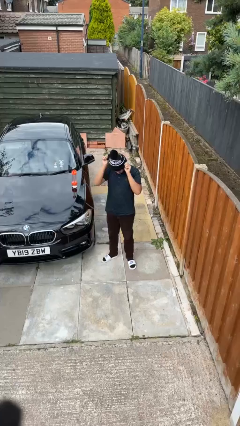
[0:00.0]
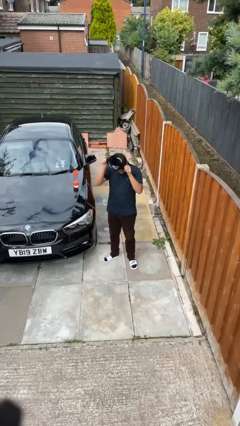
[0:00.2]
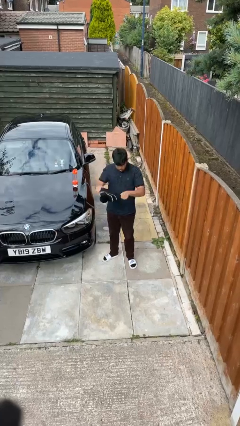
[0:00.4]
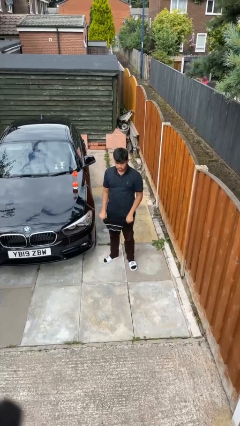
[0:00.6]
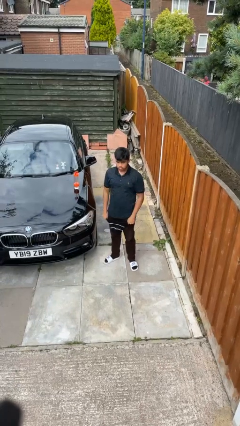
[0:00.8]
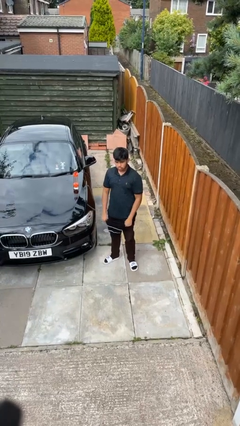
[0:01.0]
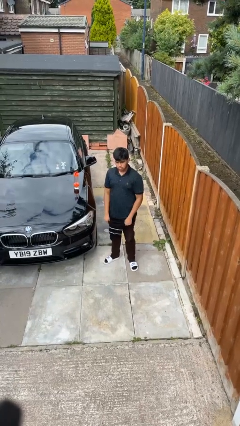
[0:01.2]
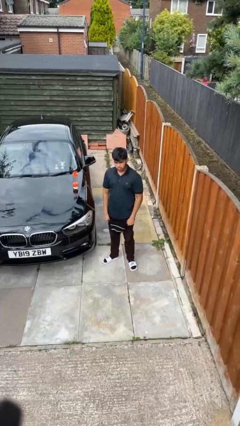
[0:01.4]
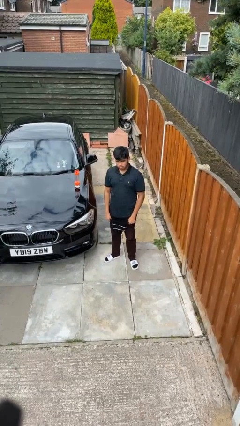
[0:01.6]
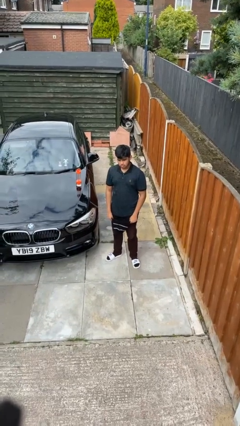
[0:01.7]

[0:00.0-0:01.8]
person takes off hat

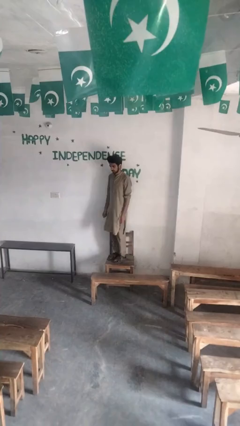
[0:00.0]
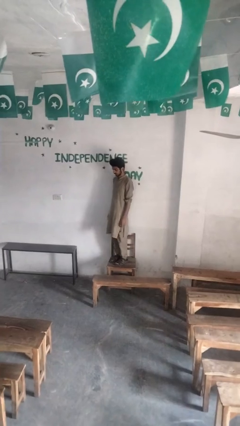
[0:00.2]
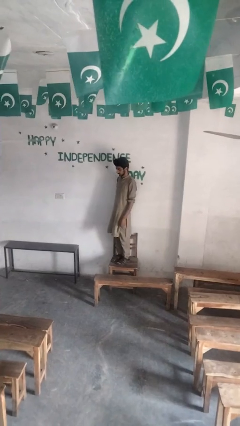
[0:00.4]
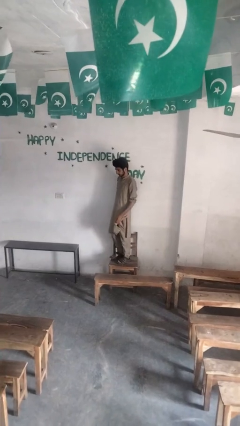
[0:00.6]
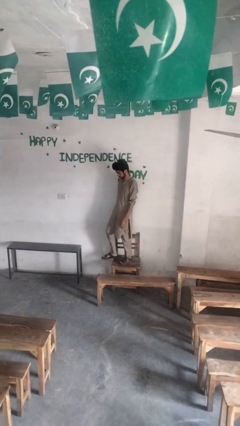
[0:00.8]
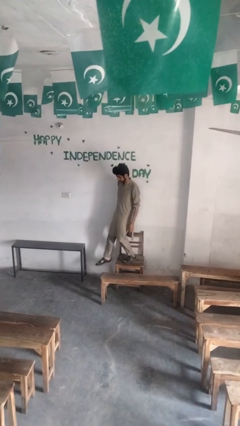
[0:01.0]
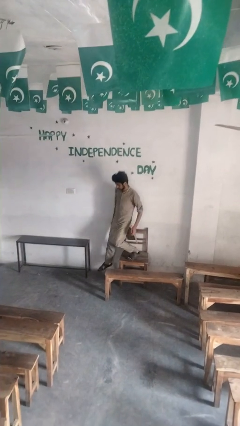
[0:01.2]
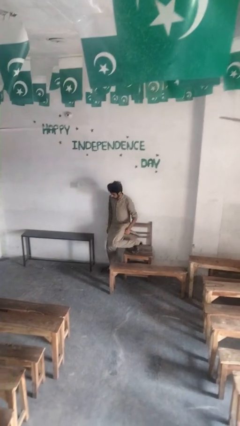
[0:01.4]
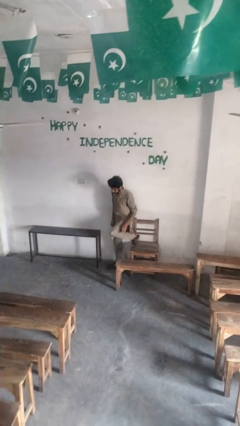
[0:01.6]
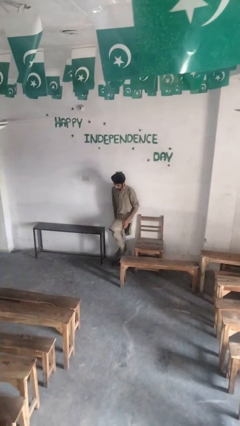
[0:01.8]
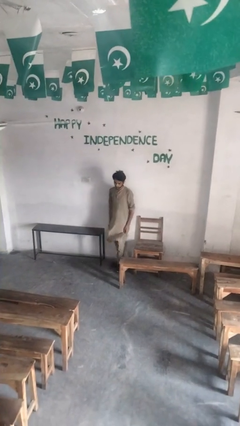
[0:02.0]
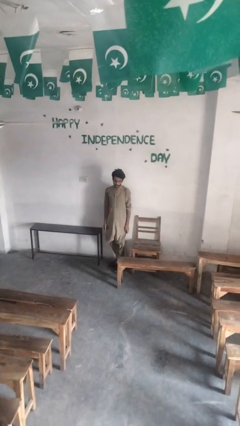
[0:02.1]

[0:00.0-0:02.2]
person climbs off chair

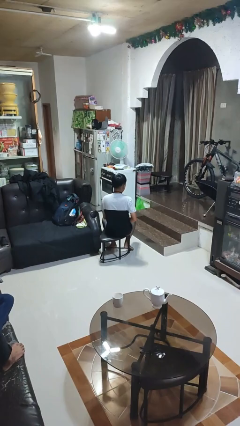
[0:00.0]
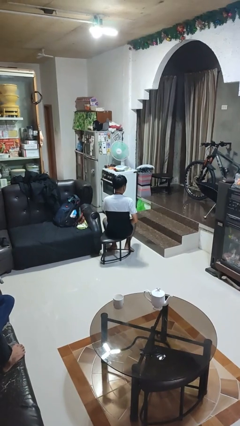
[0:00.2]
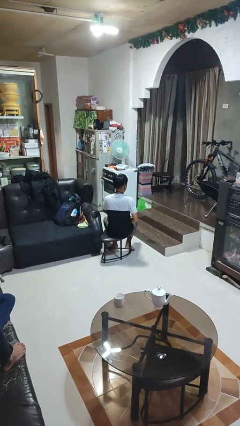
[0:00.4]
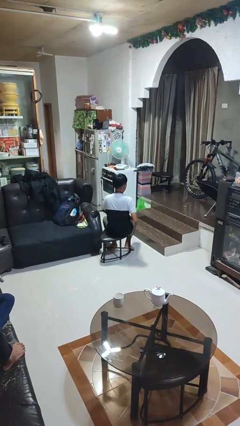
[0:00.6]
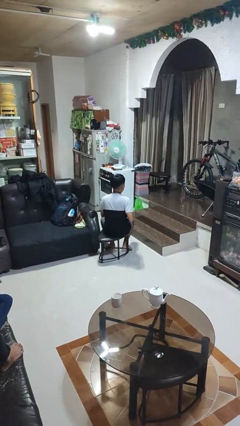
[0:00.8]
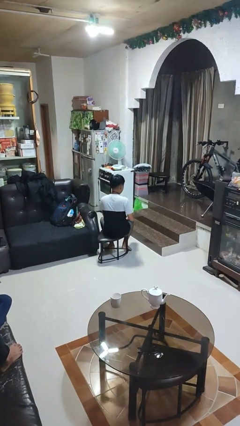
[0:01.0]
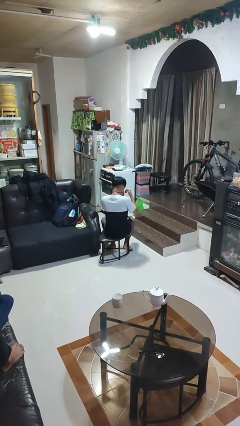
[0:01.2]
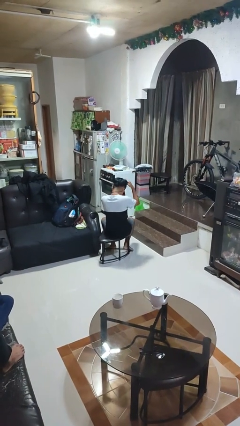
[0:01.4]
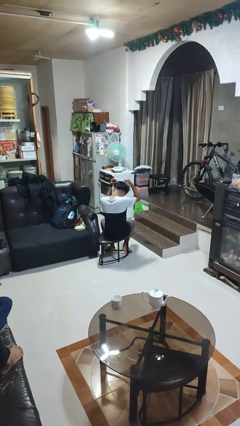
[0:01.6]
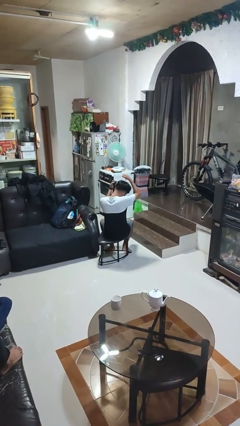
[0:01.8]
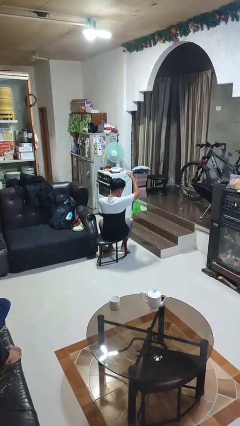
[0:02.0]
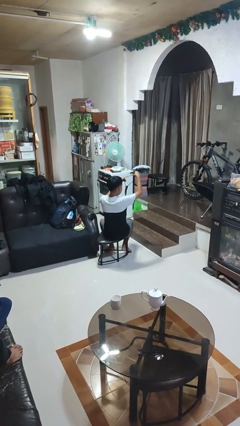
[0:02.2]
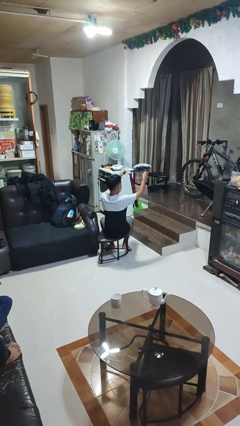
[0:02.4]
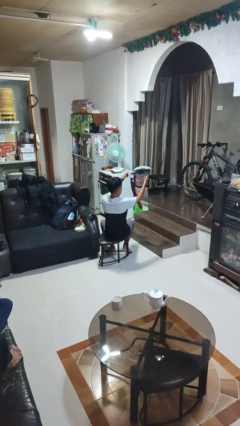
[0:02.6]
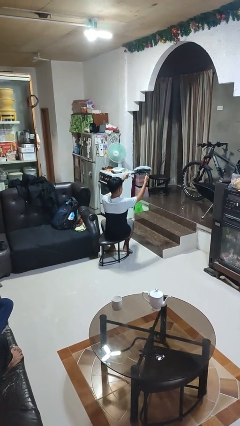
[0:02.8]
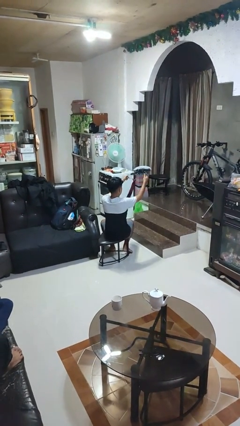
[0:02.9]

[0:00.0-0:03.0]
person takes off necktie

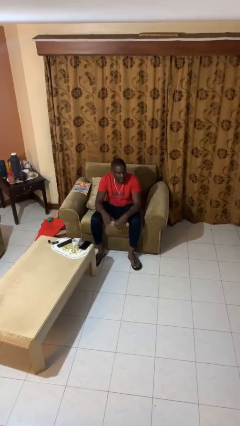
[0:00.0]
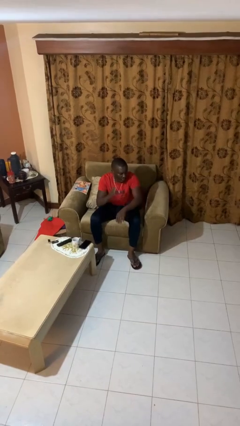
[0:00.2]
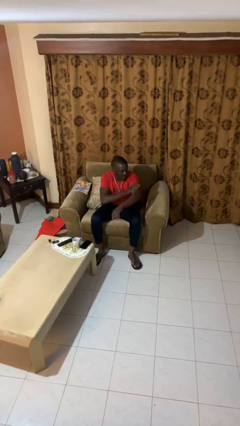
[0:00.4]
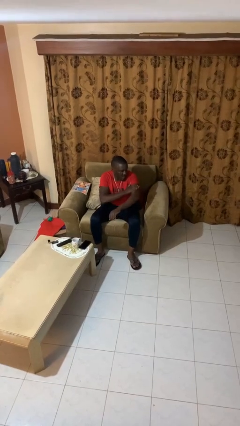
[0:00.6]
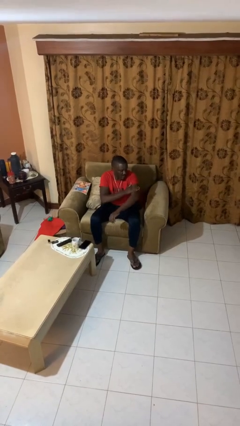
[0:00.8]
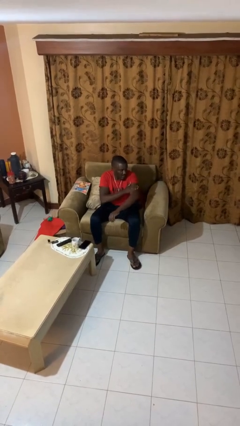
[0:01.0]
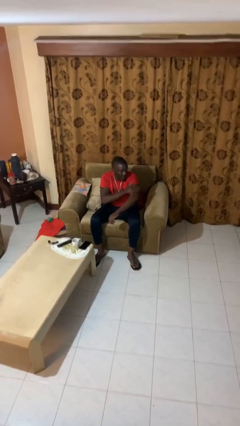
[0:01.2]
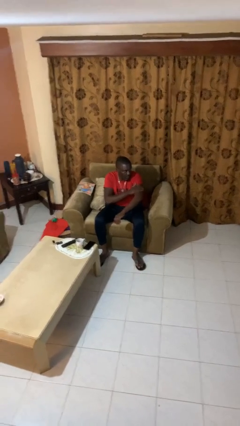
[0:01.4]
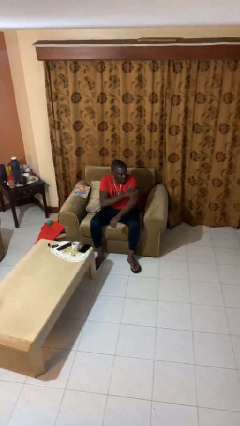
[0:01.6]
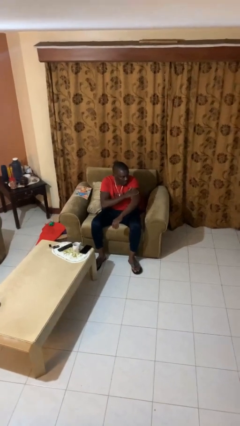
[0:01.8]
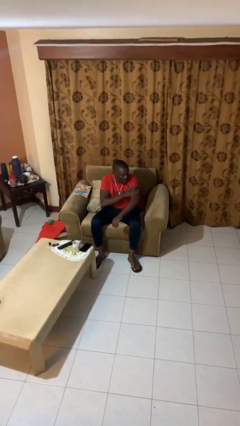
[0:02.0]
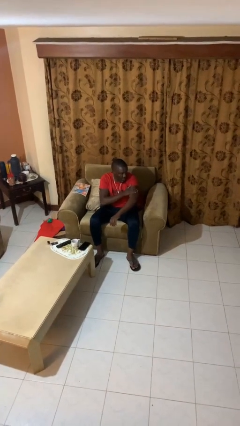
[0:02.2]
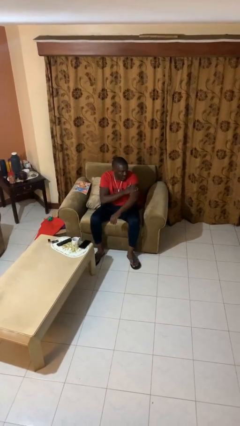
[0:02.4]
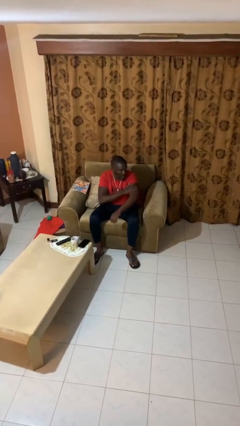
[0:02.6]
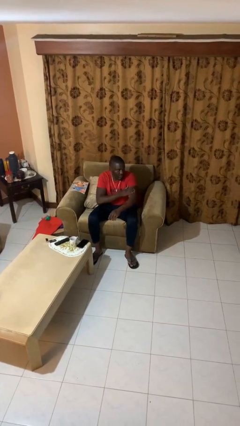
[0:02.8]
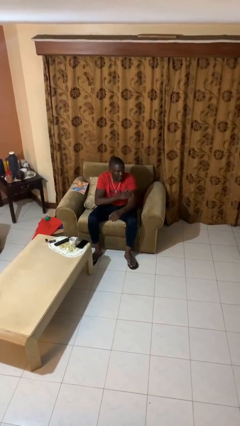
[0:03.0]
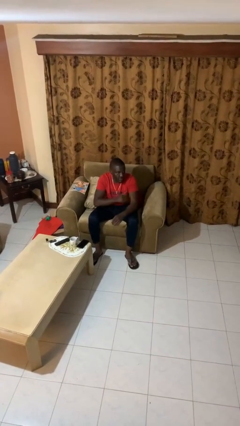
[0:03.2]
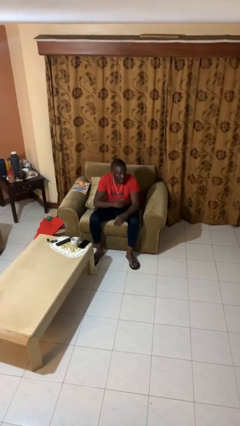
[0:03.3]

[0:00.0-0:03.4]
person swats bug

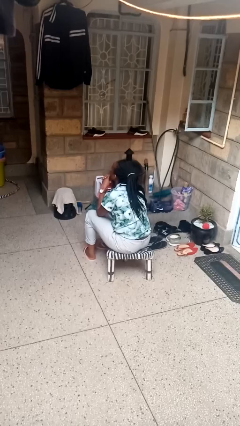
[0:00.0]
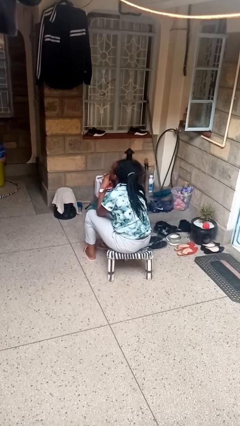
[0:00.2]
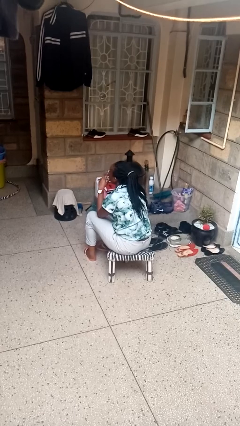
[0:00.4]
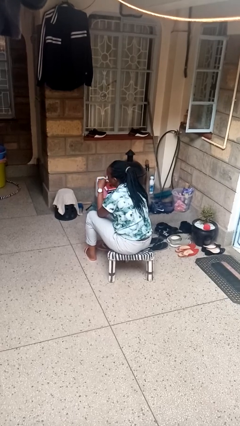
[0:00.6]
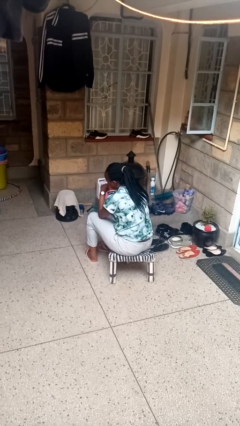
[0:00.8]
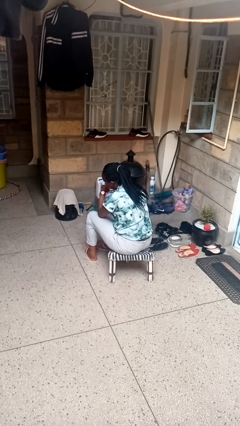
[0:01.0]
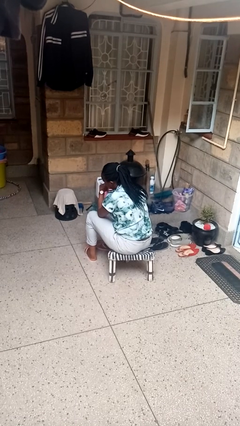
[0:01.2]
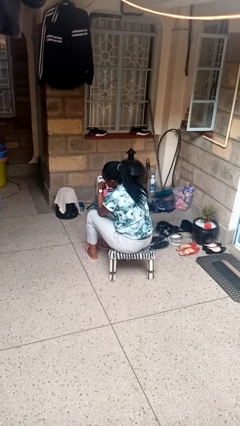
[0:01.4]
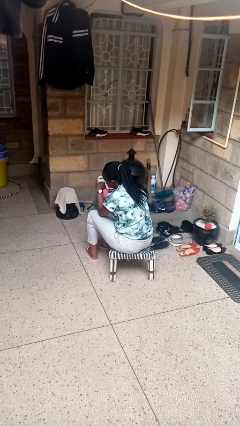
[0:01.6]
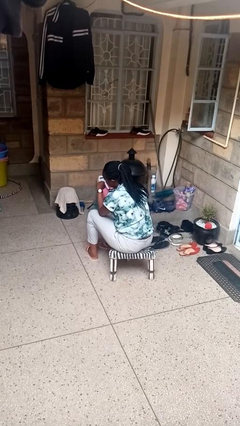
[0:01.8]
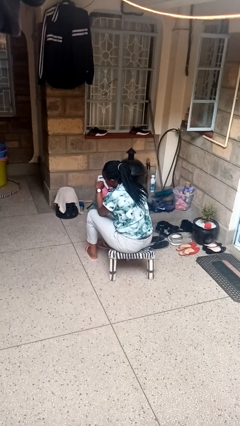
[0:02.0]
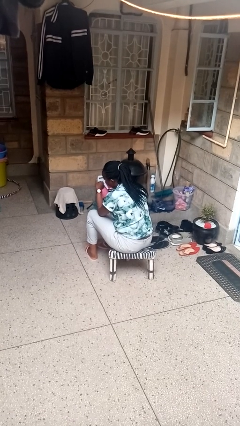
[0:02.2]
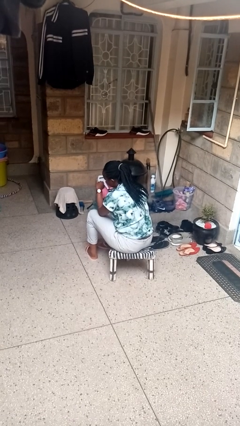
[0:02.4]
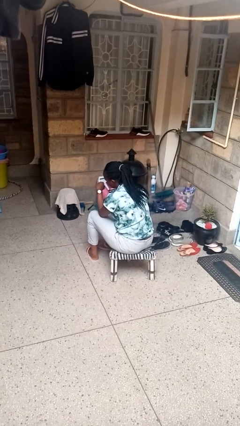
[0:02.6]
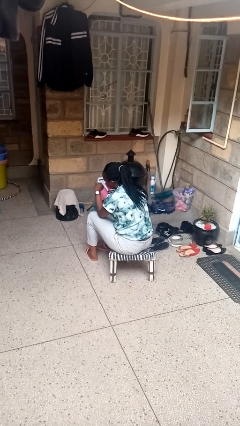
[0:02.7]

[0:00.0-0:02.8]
person looks at wristwatch

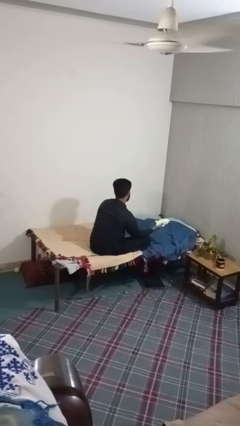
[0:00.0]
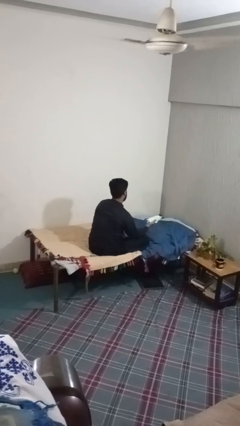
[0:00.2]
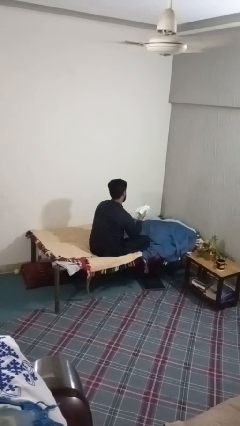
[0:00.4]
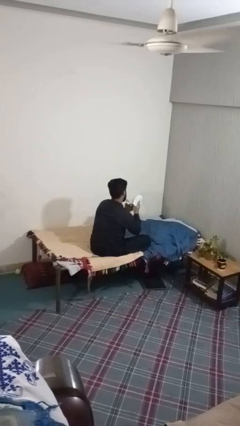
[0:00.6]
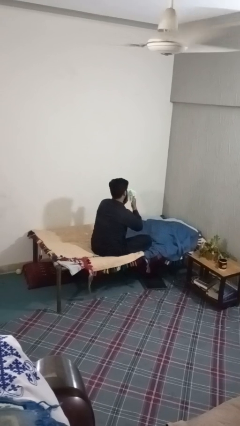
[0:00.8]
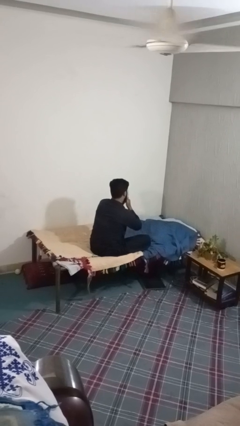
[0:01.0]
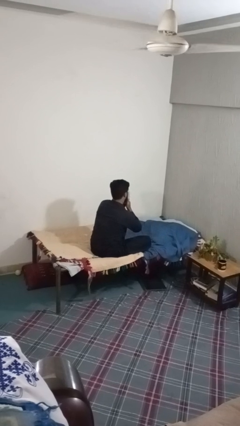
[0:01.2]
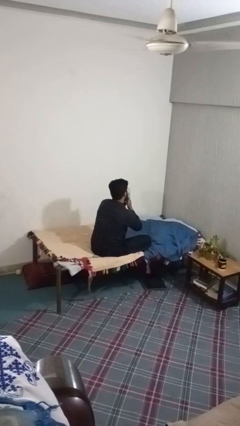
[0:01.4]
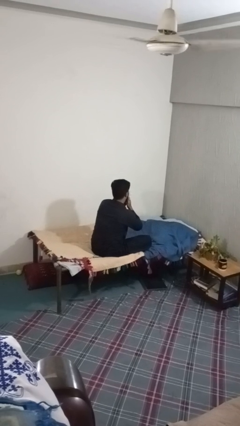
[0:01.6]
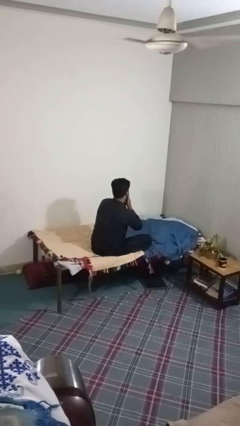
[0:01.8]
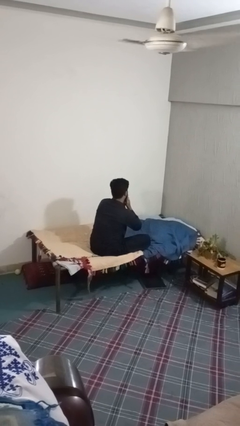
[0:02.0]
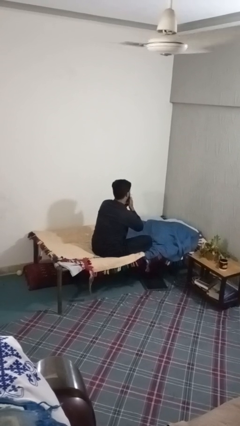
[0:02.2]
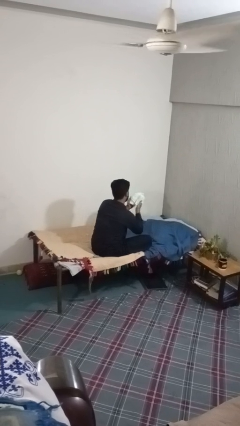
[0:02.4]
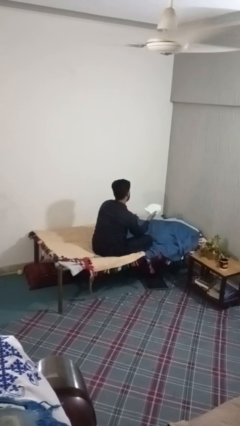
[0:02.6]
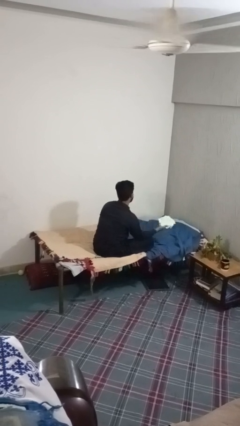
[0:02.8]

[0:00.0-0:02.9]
person blows nose

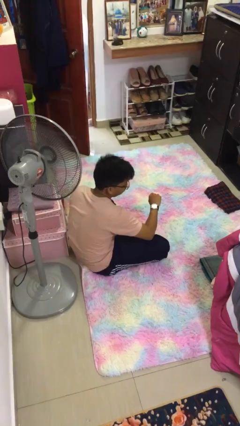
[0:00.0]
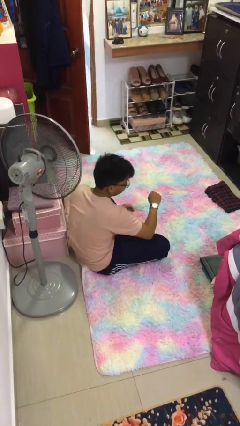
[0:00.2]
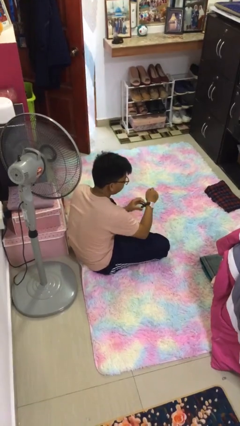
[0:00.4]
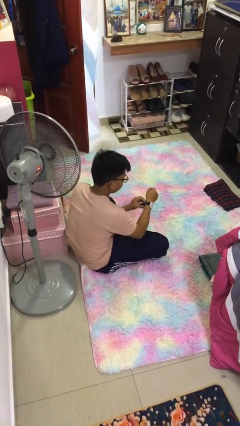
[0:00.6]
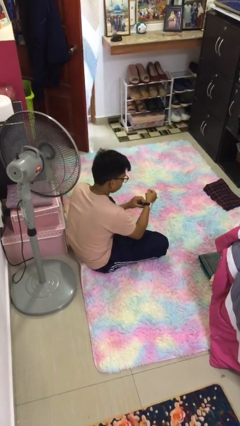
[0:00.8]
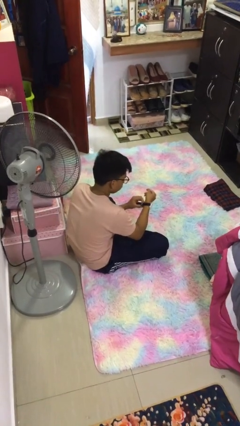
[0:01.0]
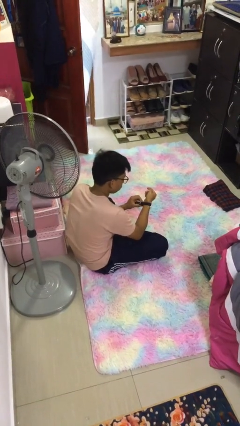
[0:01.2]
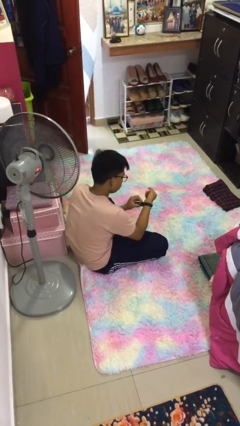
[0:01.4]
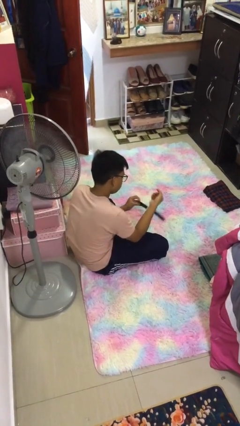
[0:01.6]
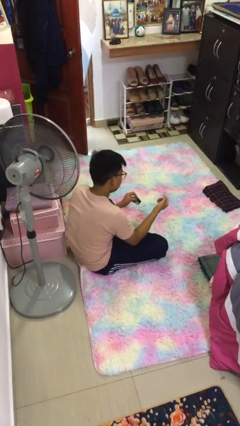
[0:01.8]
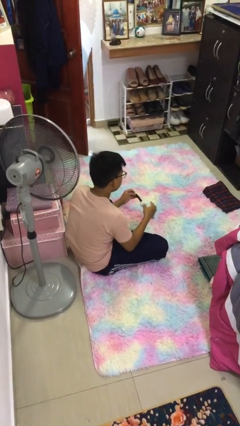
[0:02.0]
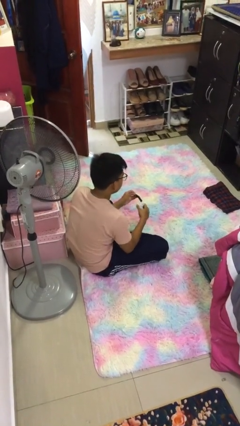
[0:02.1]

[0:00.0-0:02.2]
person takes off wristwatch
